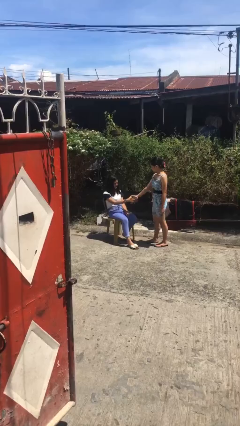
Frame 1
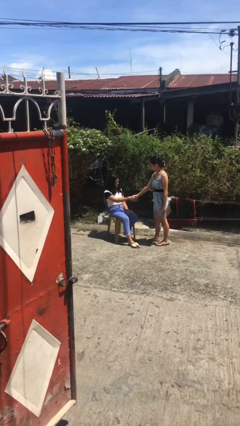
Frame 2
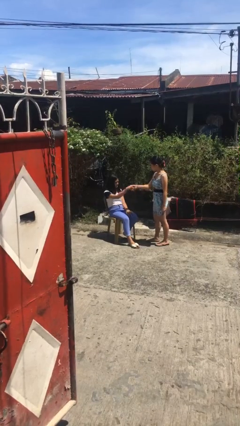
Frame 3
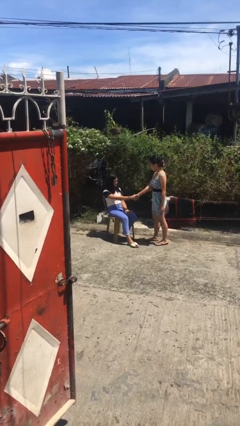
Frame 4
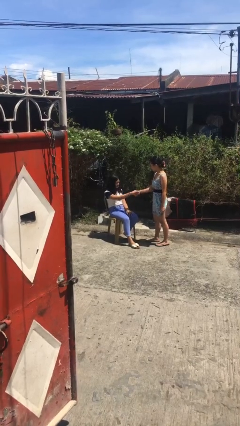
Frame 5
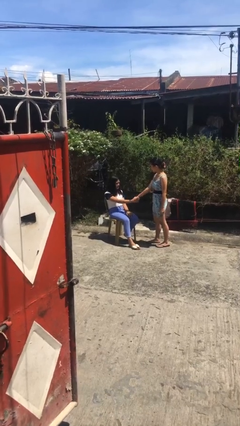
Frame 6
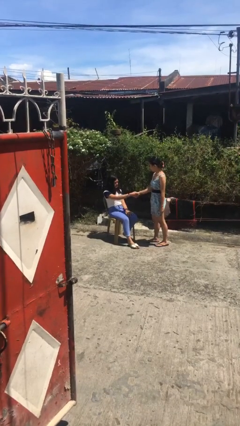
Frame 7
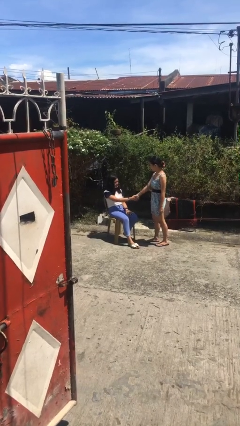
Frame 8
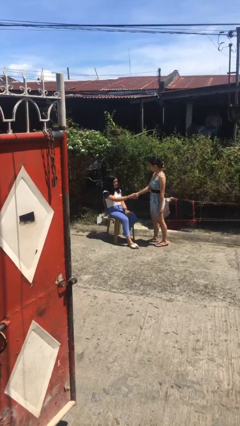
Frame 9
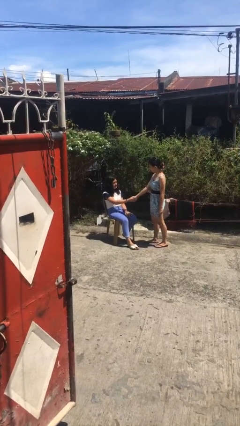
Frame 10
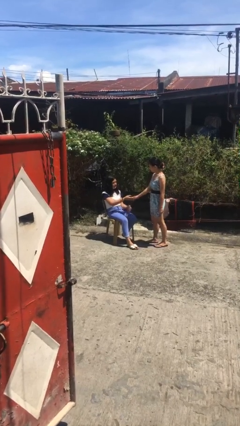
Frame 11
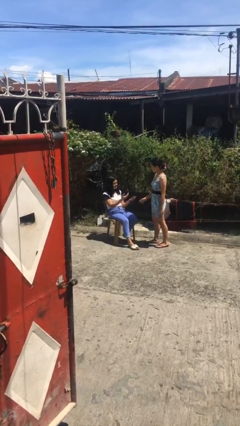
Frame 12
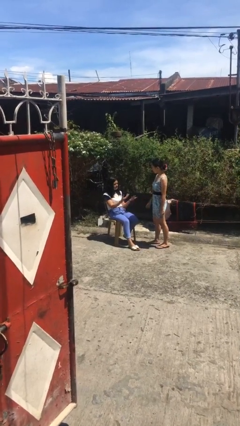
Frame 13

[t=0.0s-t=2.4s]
person shakes hand

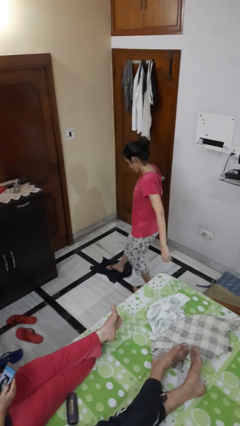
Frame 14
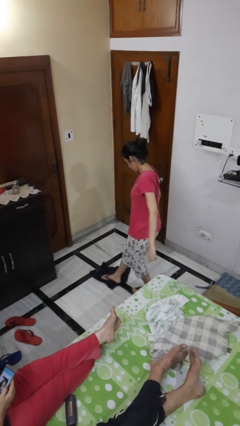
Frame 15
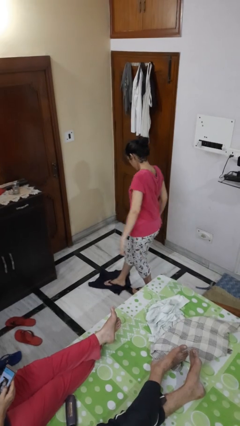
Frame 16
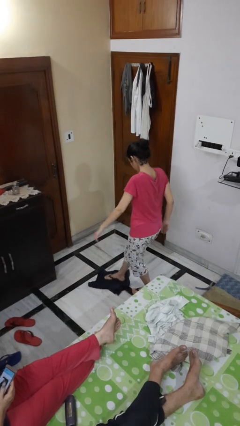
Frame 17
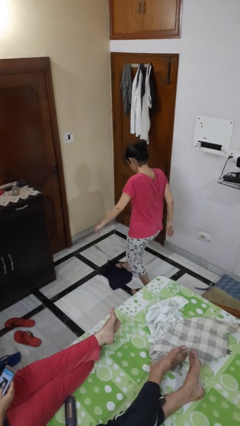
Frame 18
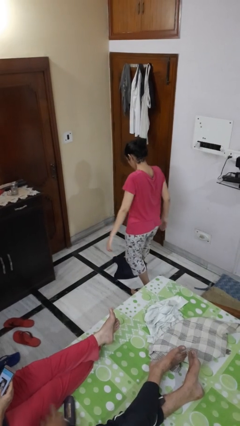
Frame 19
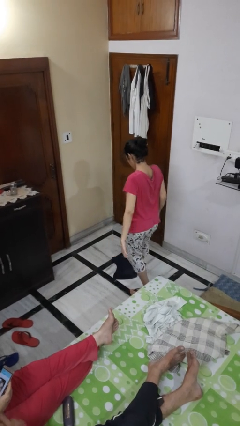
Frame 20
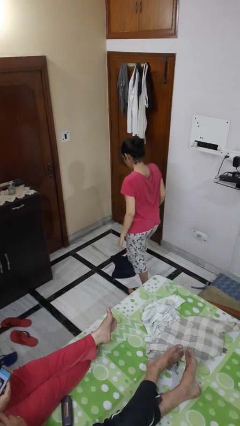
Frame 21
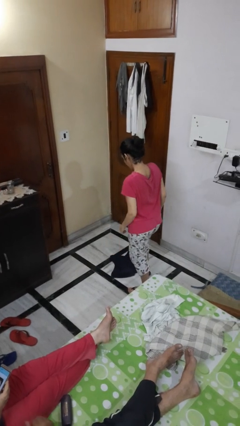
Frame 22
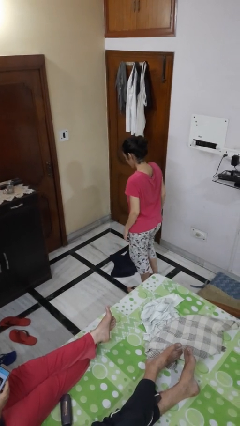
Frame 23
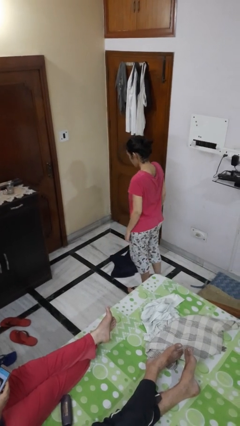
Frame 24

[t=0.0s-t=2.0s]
person mops

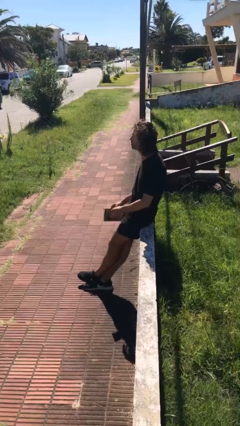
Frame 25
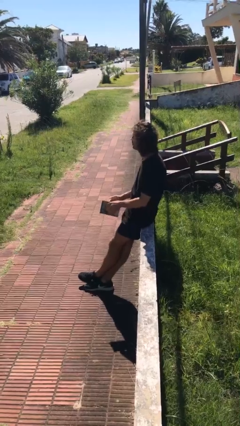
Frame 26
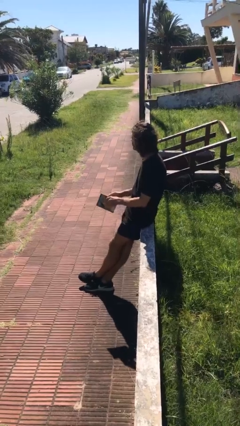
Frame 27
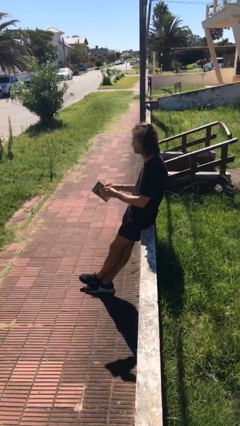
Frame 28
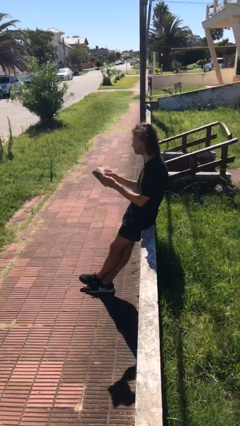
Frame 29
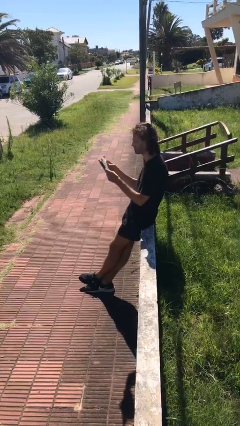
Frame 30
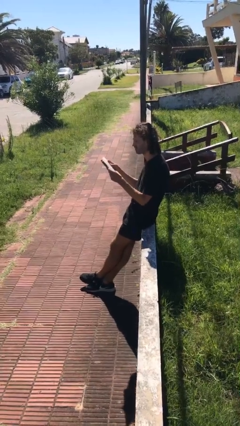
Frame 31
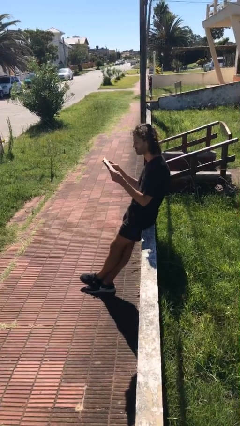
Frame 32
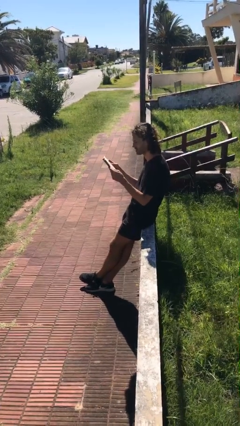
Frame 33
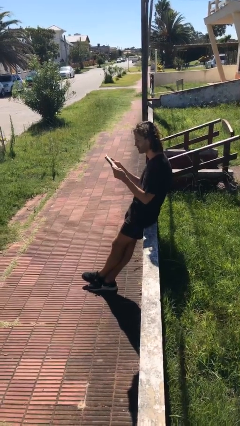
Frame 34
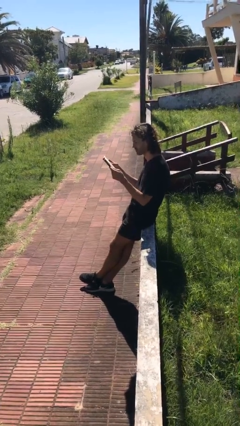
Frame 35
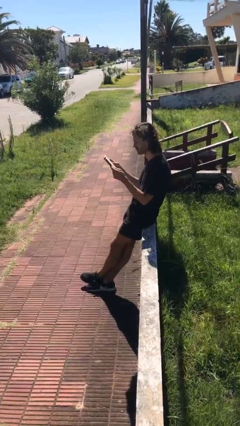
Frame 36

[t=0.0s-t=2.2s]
person reads document

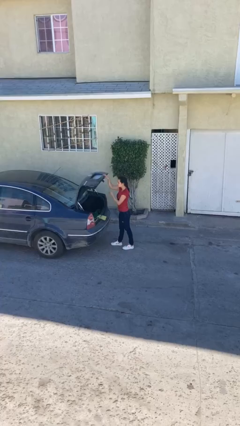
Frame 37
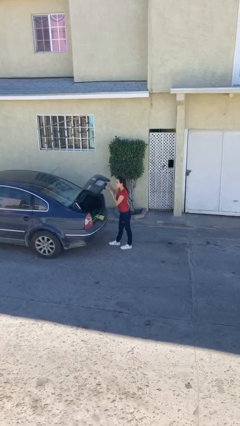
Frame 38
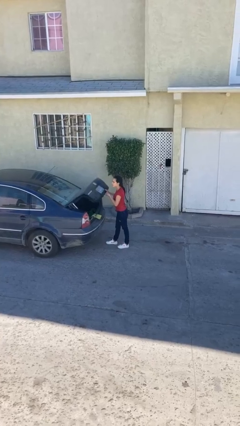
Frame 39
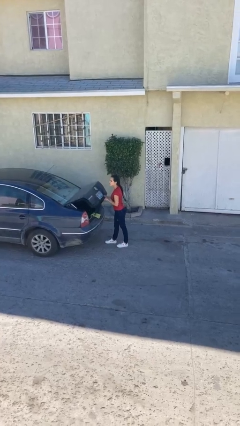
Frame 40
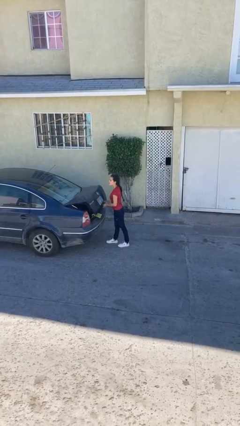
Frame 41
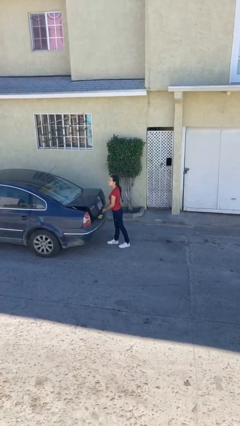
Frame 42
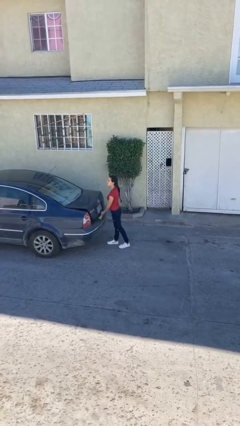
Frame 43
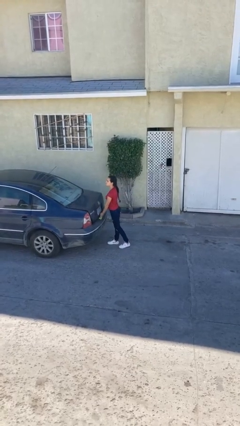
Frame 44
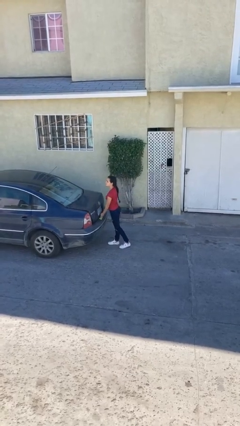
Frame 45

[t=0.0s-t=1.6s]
person closes car trunk

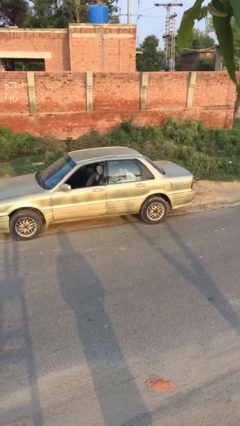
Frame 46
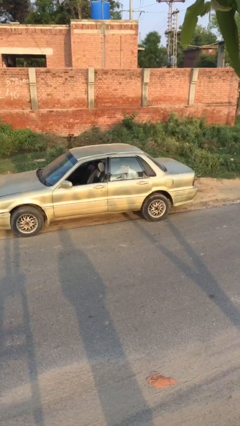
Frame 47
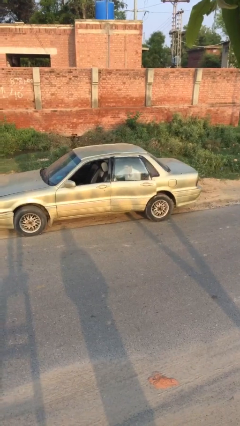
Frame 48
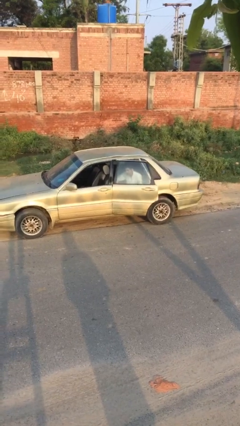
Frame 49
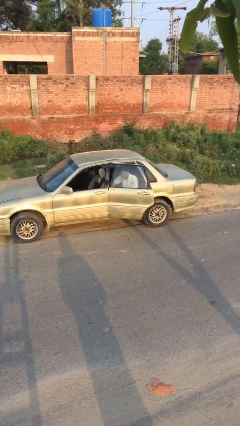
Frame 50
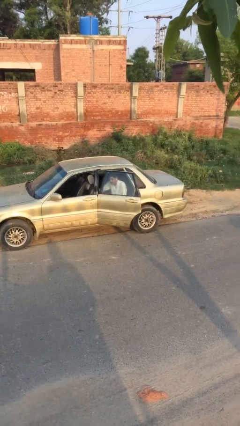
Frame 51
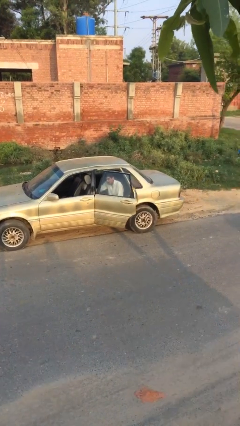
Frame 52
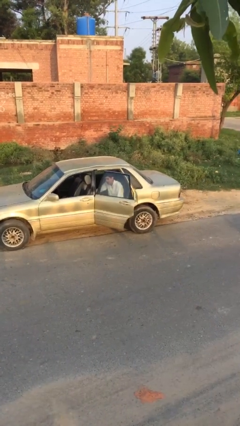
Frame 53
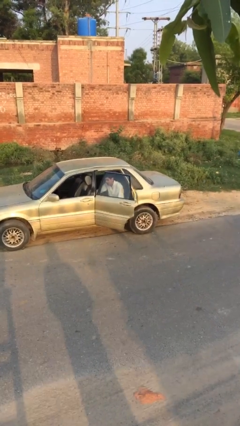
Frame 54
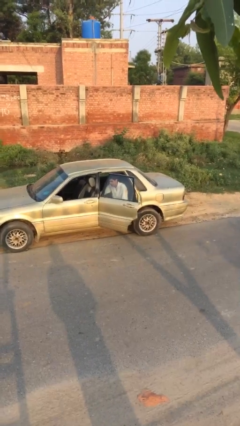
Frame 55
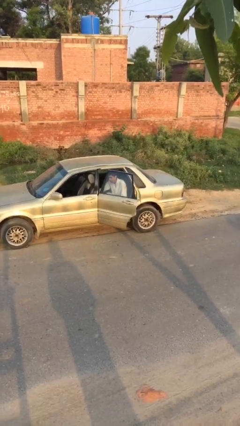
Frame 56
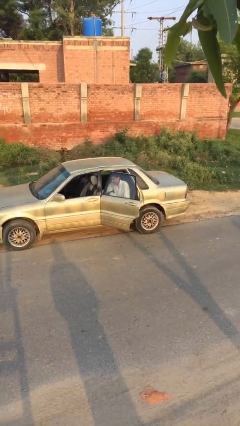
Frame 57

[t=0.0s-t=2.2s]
person opens car door

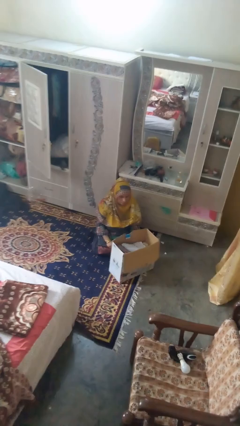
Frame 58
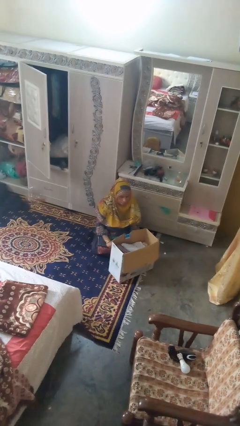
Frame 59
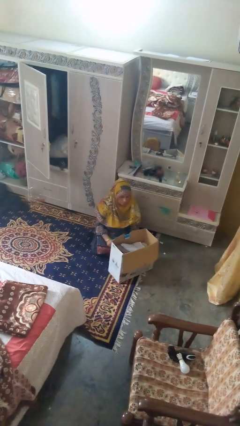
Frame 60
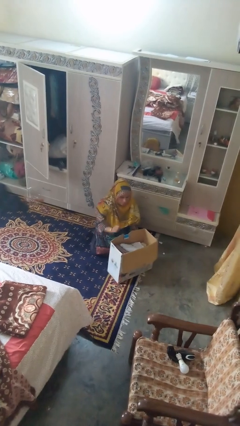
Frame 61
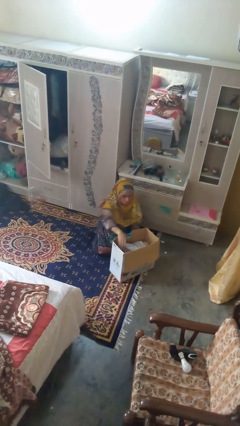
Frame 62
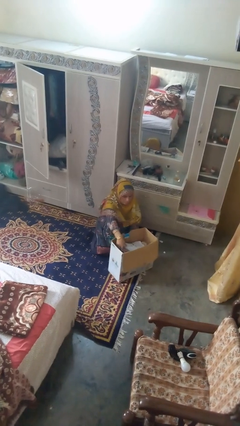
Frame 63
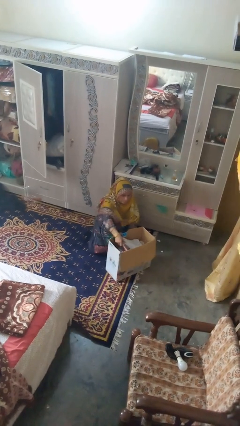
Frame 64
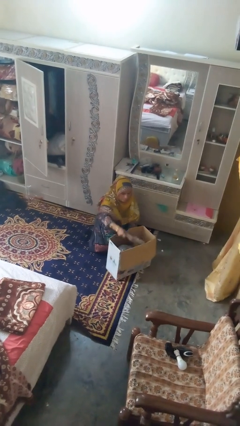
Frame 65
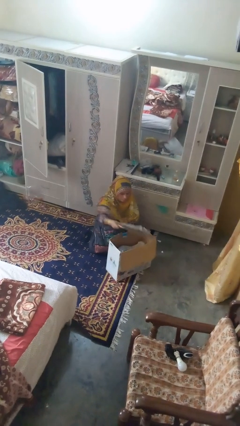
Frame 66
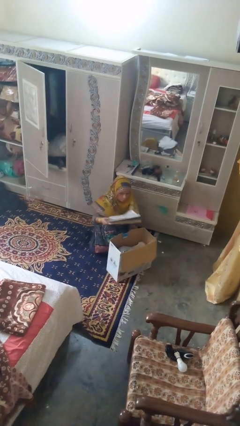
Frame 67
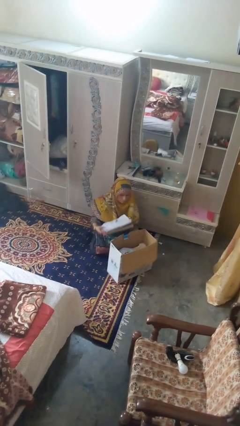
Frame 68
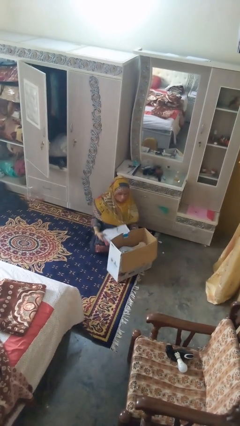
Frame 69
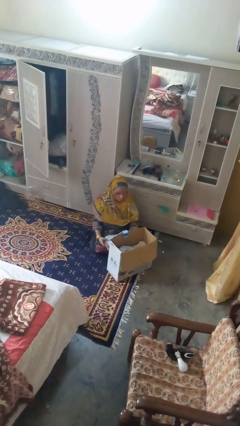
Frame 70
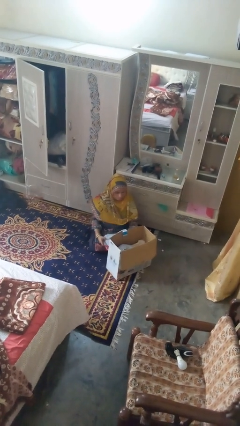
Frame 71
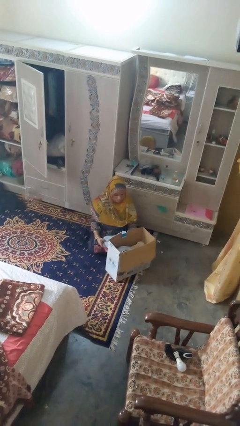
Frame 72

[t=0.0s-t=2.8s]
person takes object from box

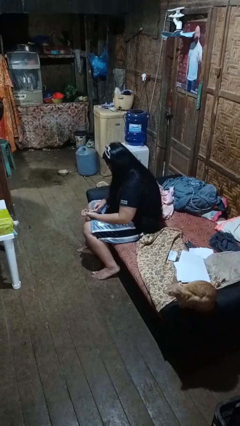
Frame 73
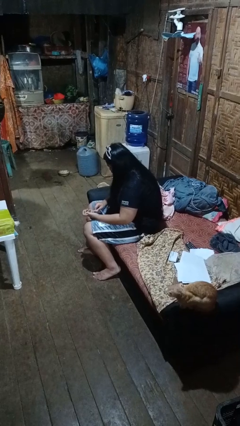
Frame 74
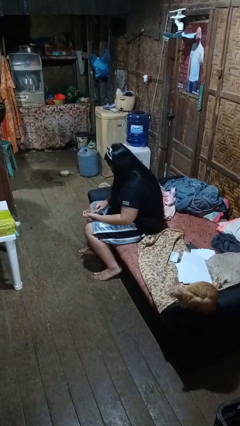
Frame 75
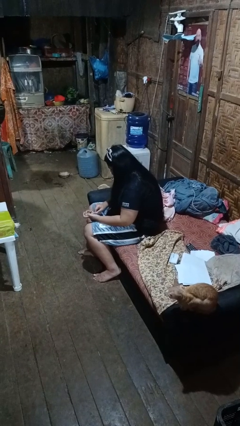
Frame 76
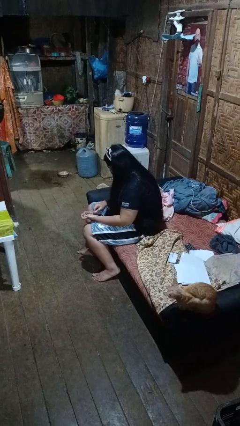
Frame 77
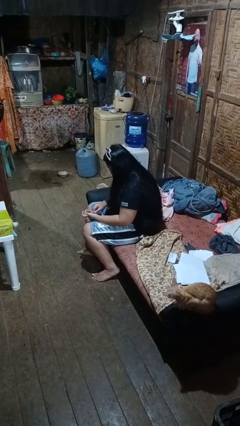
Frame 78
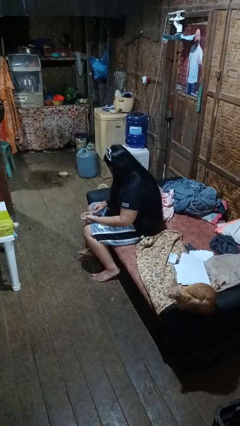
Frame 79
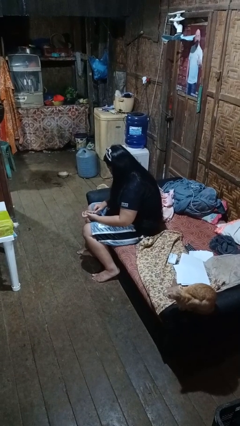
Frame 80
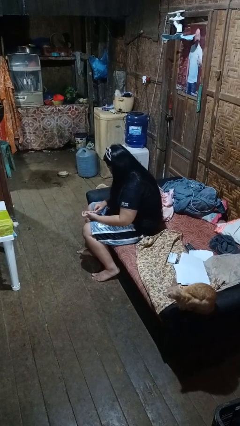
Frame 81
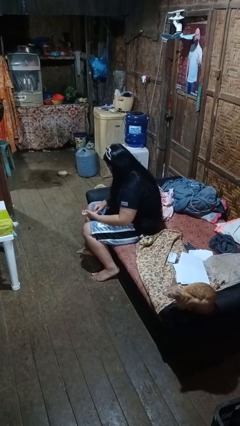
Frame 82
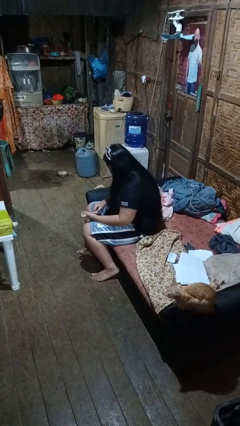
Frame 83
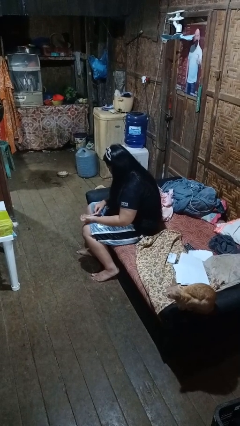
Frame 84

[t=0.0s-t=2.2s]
person files fingernails

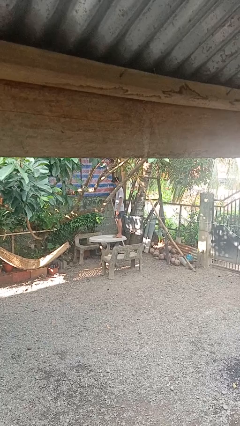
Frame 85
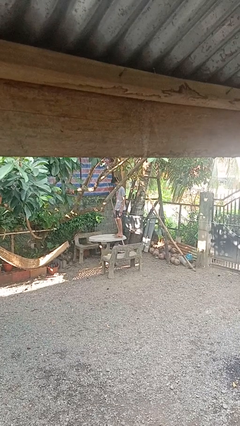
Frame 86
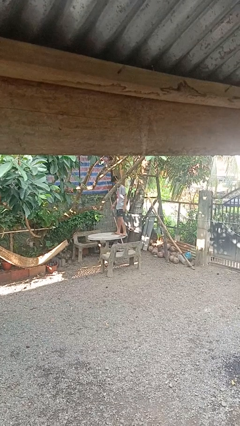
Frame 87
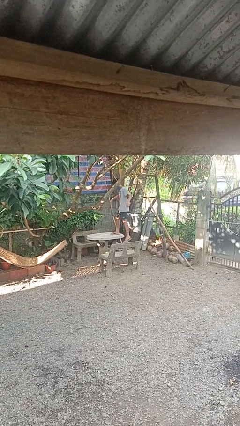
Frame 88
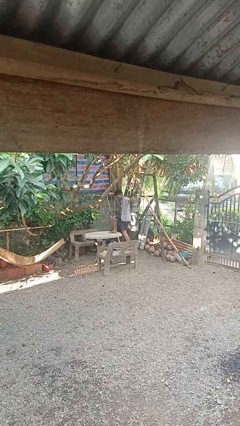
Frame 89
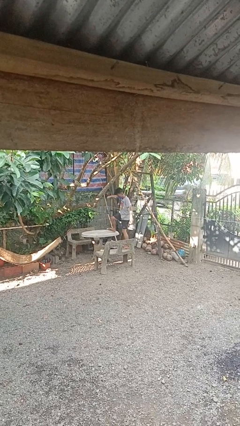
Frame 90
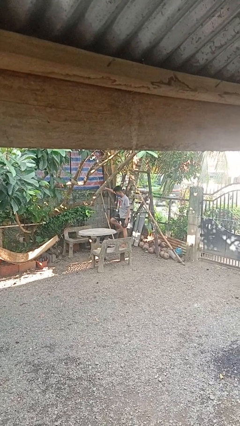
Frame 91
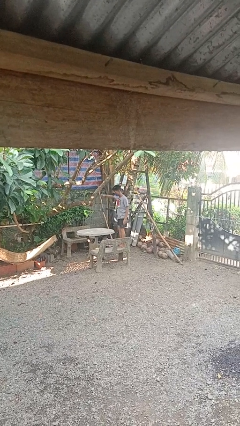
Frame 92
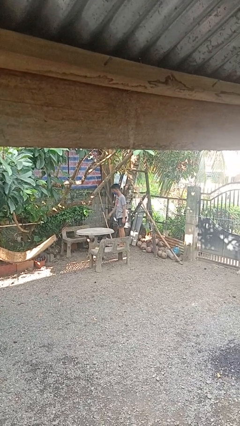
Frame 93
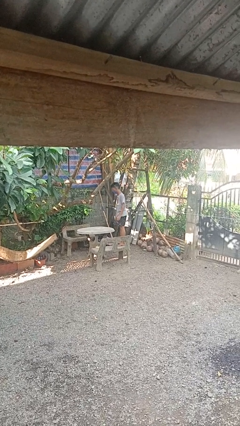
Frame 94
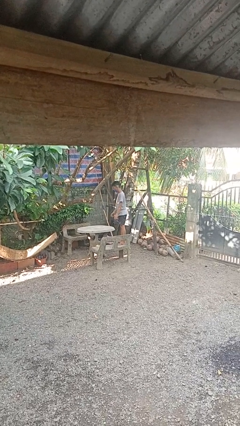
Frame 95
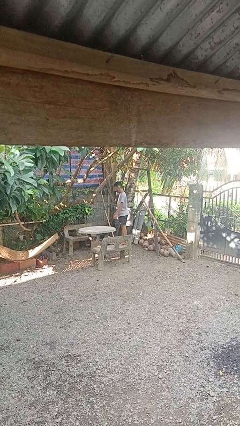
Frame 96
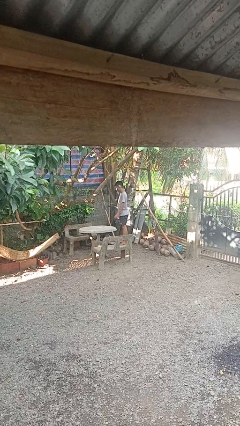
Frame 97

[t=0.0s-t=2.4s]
person climbs off table
